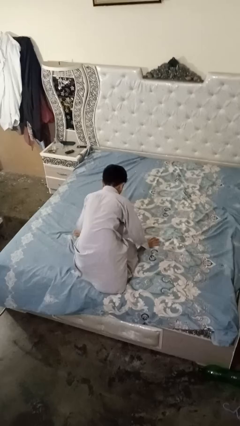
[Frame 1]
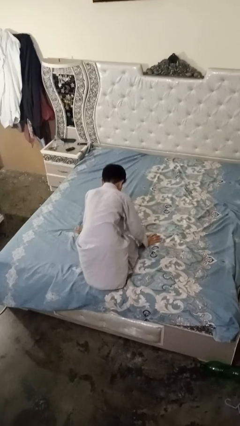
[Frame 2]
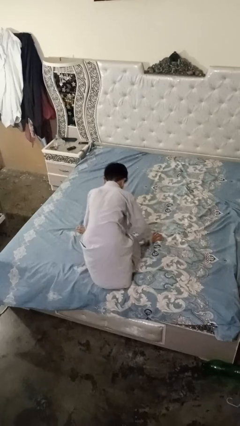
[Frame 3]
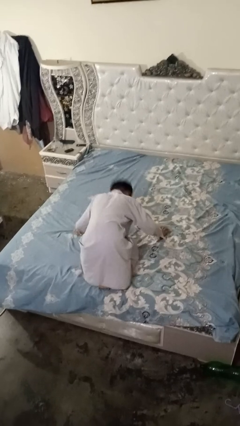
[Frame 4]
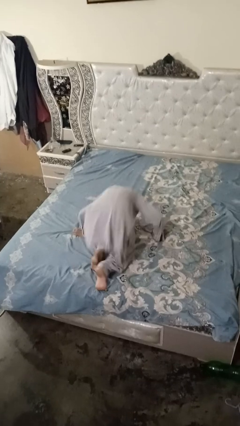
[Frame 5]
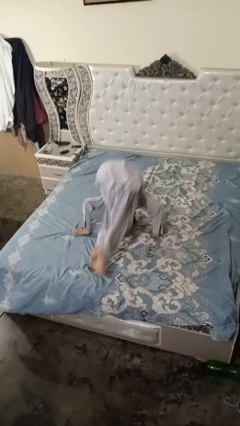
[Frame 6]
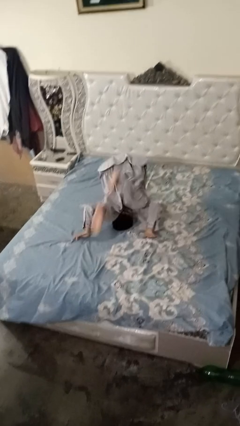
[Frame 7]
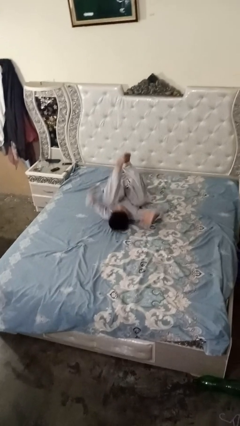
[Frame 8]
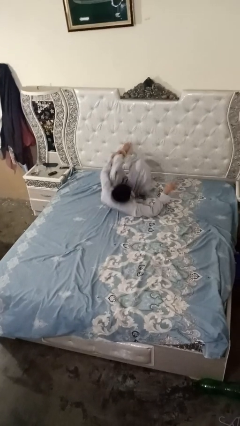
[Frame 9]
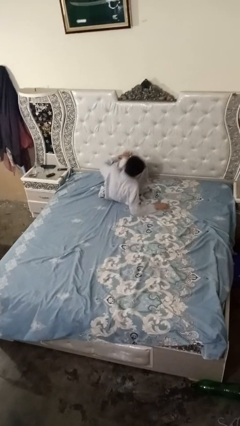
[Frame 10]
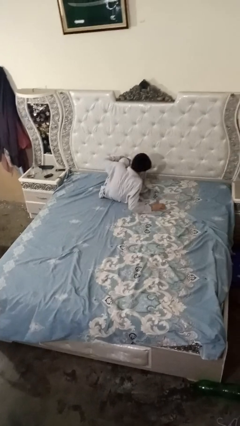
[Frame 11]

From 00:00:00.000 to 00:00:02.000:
person somersaults

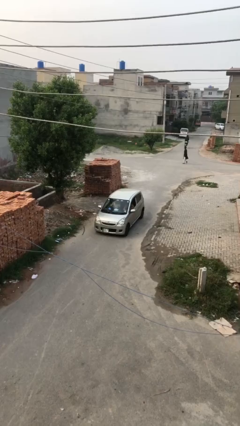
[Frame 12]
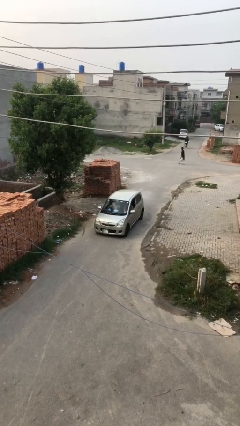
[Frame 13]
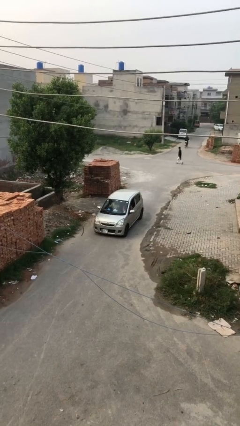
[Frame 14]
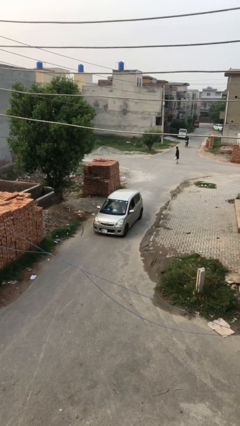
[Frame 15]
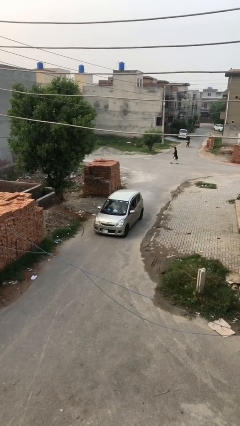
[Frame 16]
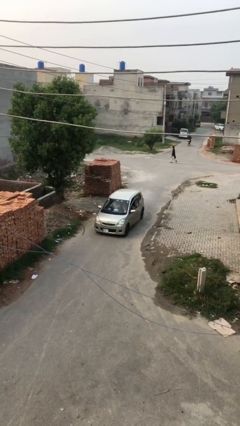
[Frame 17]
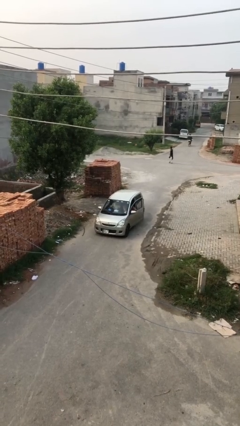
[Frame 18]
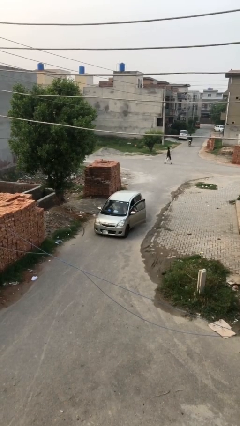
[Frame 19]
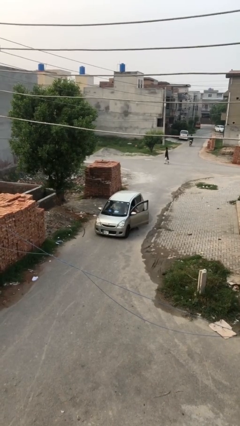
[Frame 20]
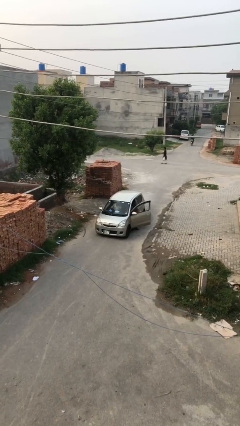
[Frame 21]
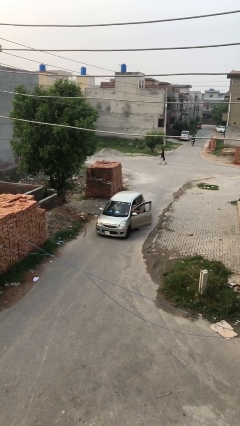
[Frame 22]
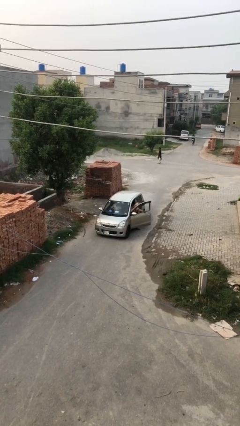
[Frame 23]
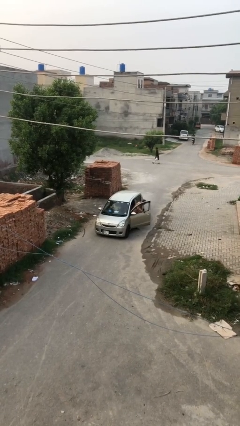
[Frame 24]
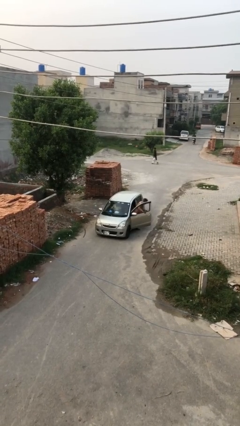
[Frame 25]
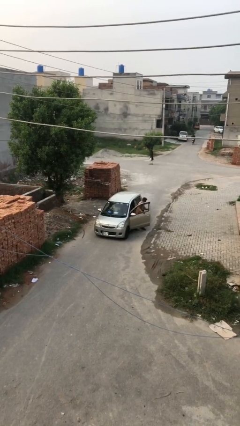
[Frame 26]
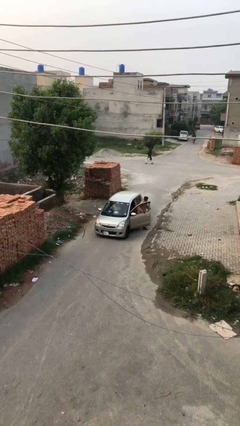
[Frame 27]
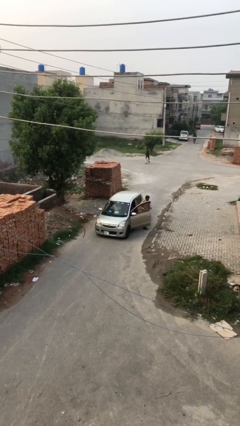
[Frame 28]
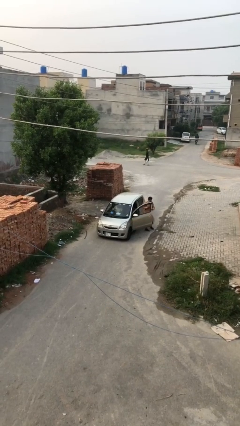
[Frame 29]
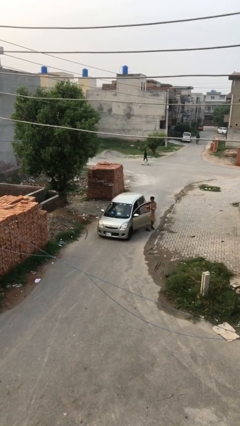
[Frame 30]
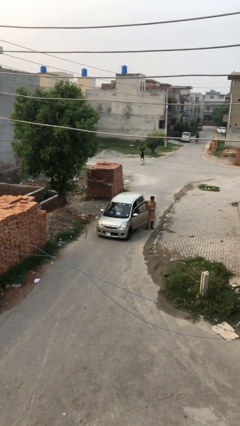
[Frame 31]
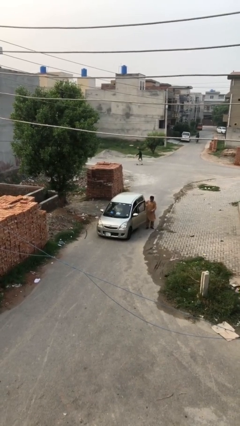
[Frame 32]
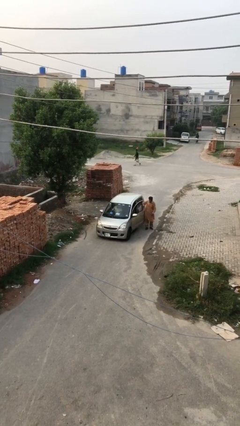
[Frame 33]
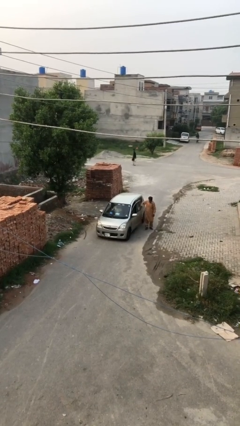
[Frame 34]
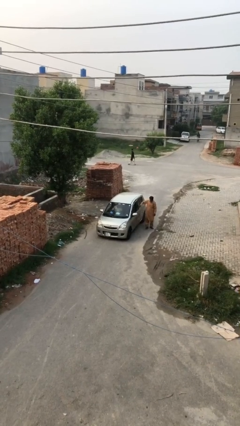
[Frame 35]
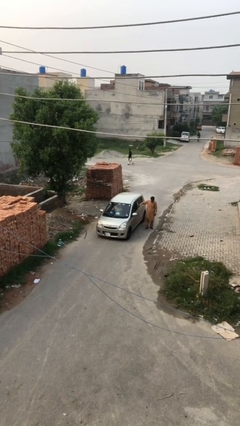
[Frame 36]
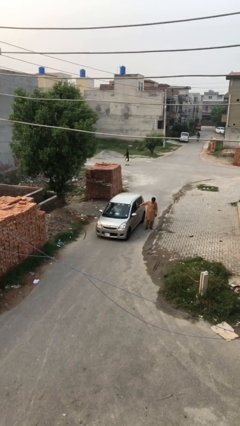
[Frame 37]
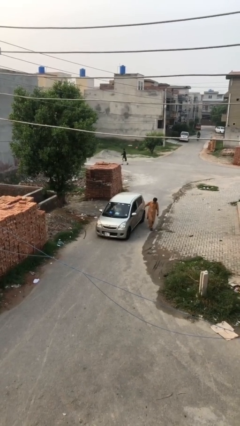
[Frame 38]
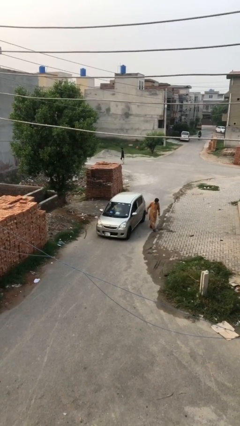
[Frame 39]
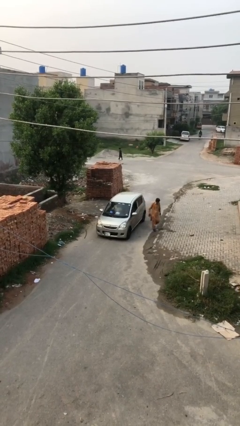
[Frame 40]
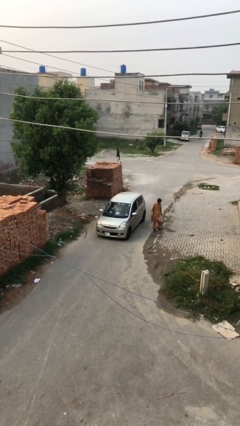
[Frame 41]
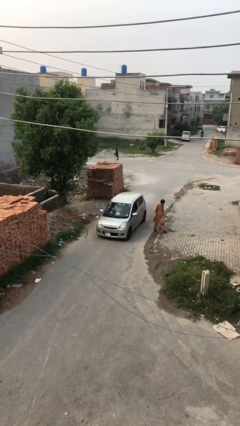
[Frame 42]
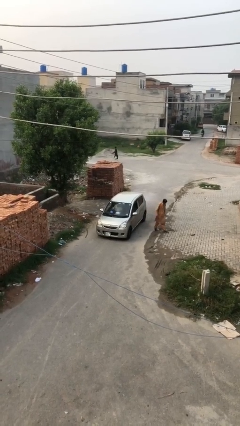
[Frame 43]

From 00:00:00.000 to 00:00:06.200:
car drops off person

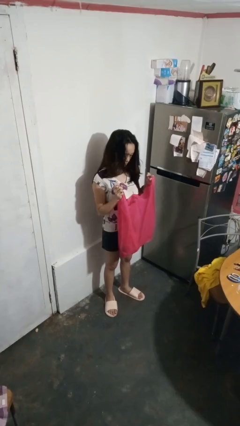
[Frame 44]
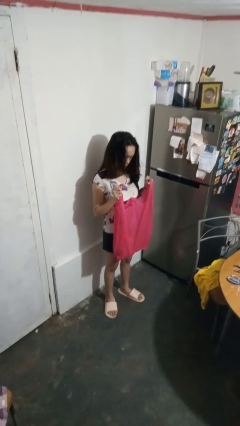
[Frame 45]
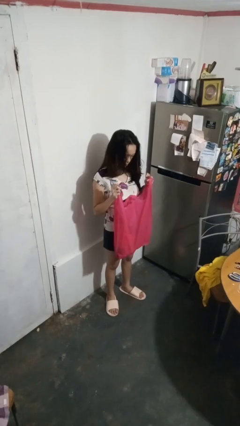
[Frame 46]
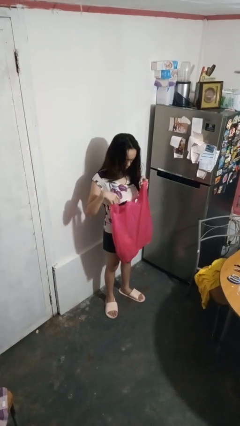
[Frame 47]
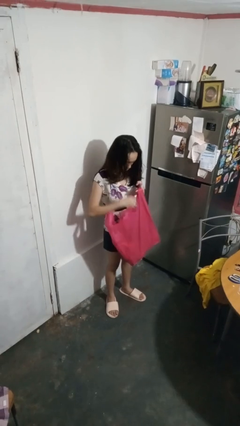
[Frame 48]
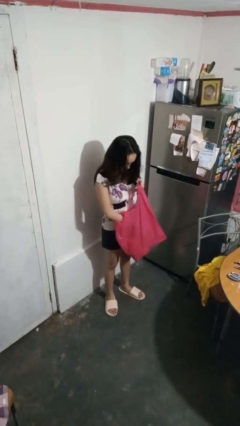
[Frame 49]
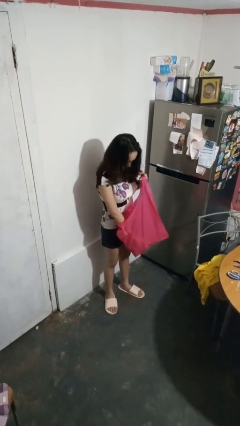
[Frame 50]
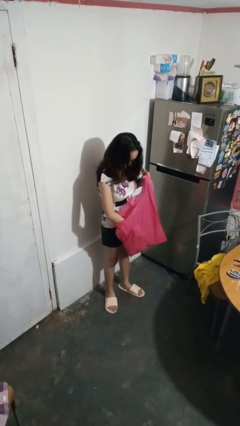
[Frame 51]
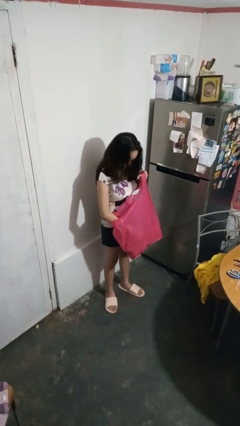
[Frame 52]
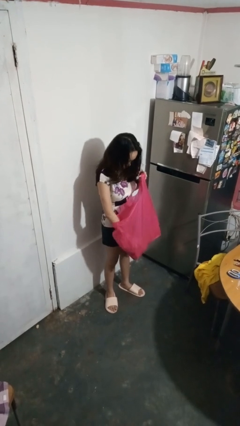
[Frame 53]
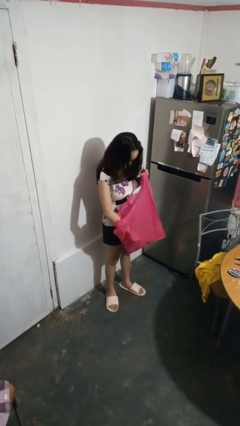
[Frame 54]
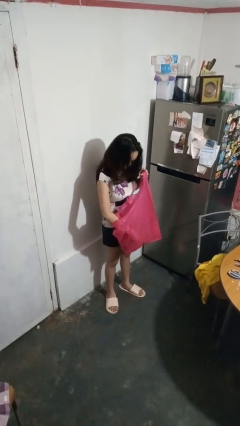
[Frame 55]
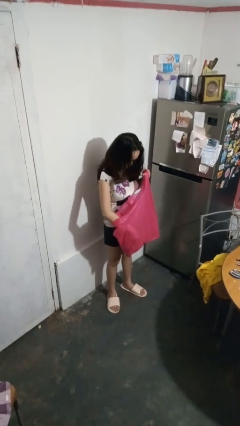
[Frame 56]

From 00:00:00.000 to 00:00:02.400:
person searches in box

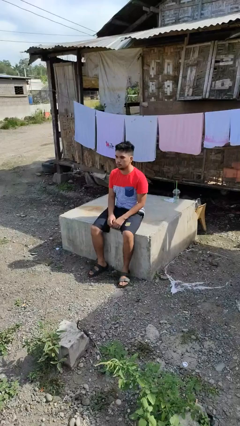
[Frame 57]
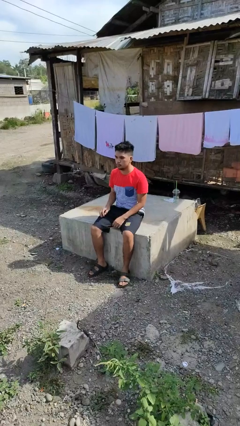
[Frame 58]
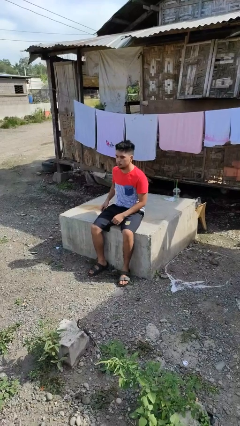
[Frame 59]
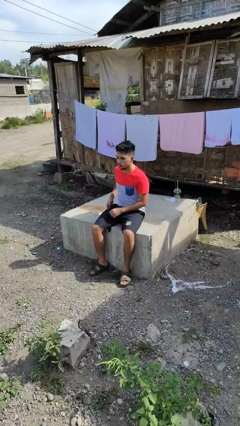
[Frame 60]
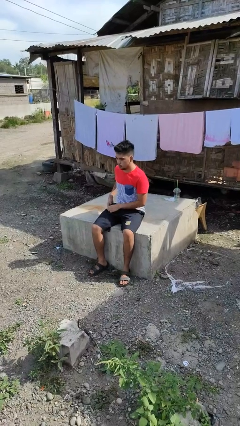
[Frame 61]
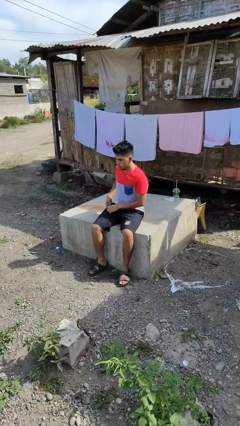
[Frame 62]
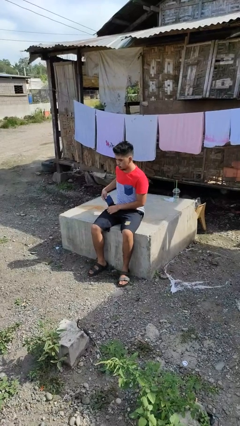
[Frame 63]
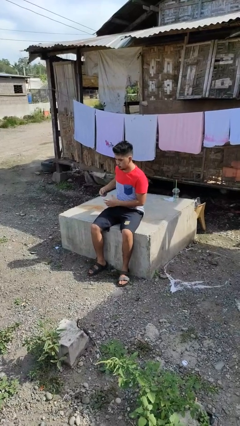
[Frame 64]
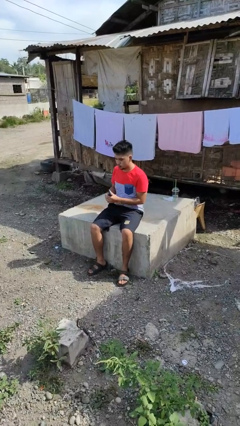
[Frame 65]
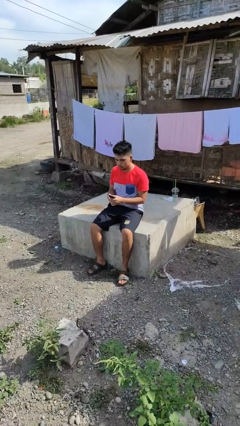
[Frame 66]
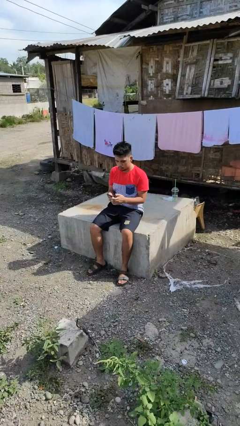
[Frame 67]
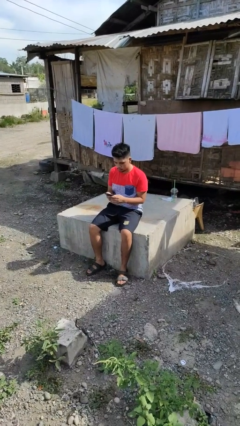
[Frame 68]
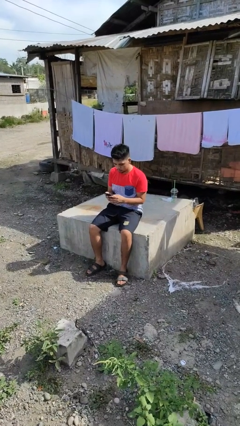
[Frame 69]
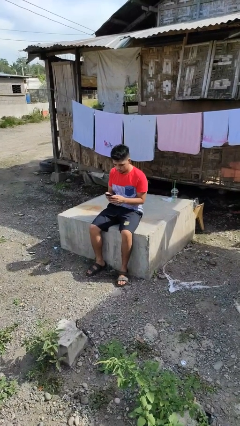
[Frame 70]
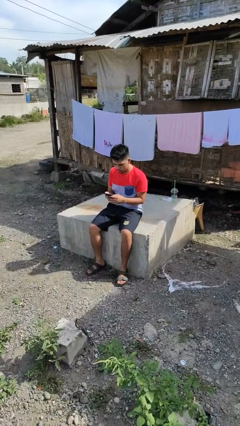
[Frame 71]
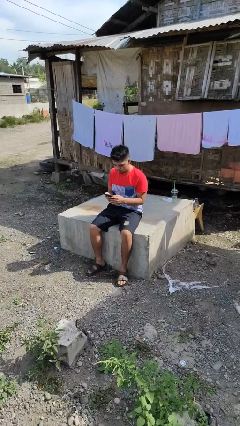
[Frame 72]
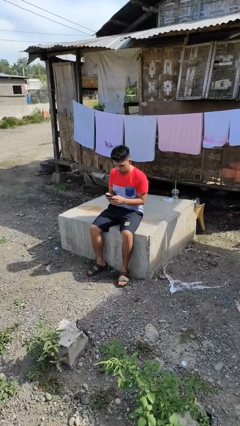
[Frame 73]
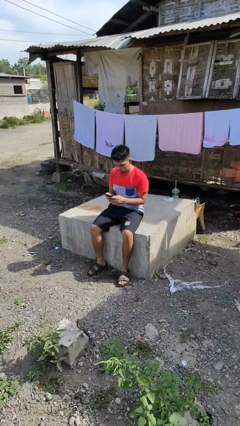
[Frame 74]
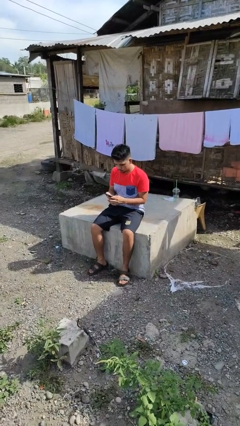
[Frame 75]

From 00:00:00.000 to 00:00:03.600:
person takes phone from pocket

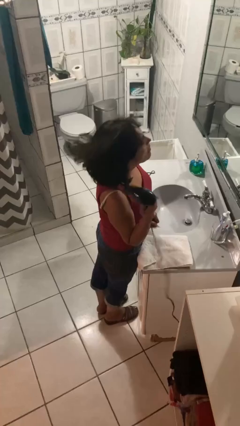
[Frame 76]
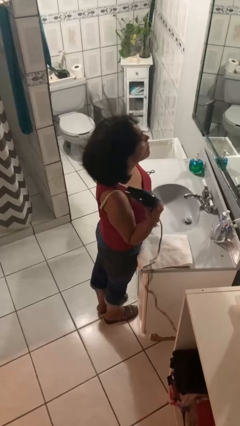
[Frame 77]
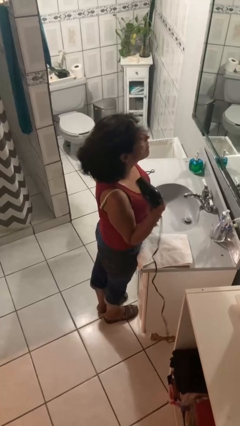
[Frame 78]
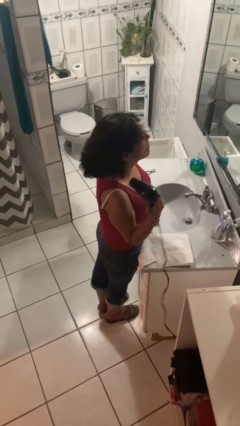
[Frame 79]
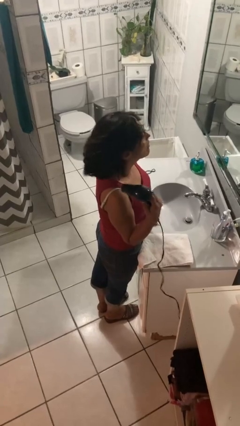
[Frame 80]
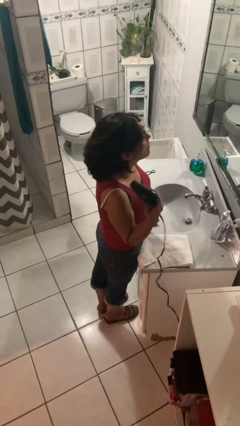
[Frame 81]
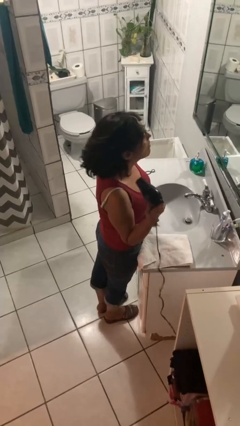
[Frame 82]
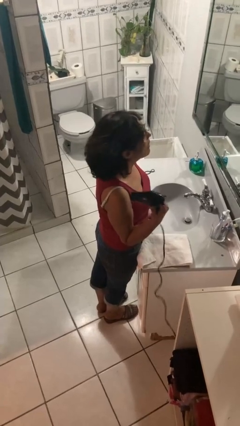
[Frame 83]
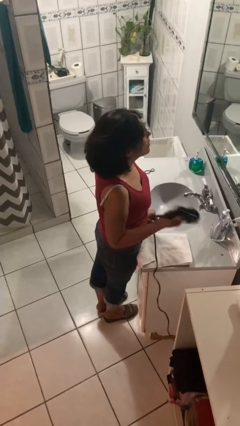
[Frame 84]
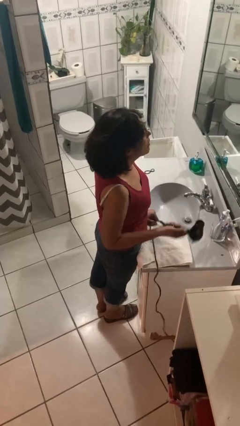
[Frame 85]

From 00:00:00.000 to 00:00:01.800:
person dries hair with hairdryer

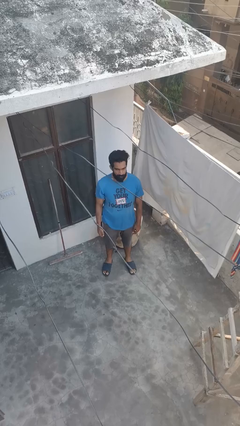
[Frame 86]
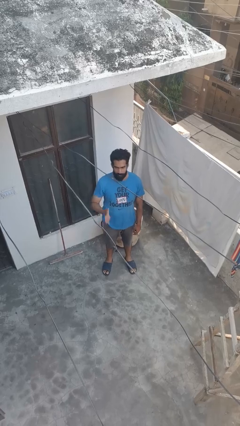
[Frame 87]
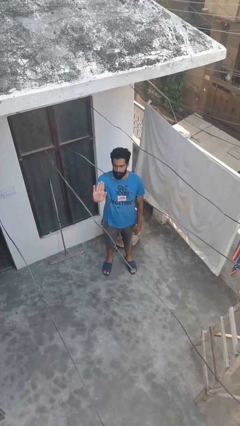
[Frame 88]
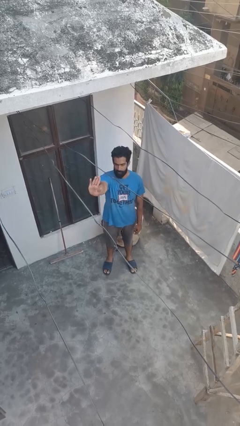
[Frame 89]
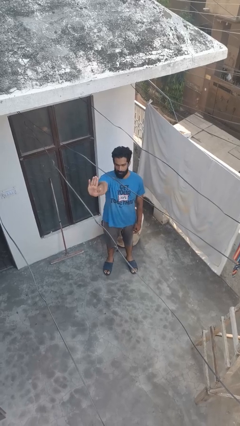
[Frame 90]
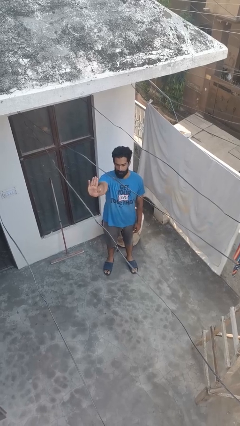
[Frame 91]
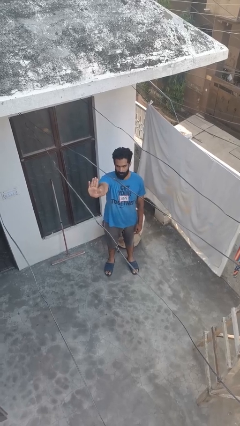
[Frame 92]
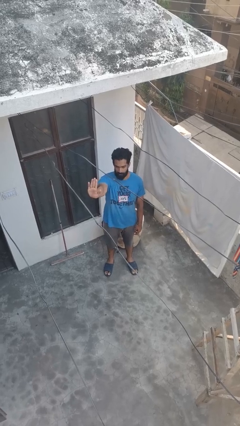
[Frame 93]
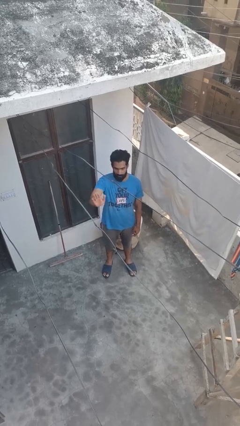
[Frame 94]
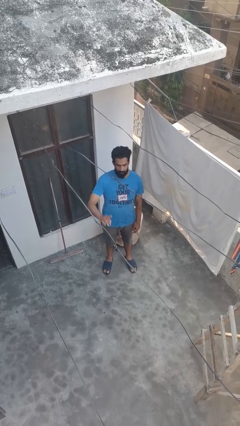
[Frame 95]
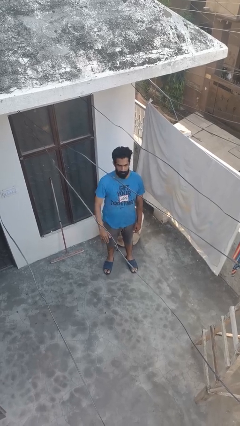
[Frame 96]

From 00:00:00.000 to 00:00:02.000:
person gestures stop
